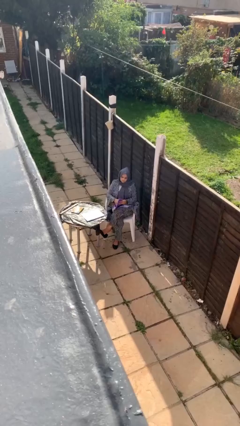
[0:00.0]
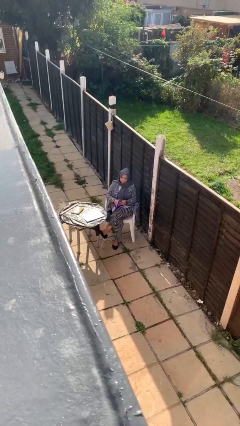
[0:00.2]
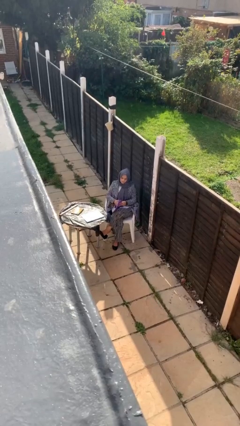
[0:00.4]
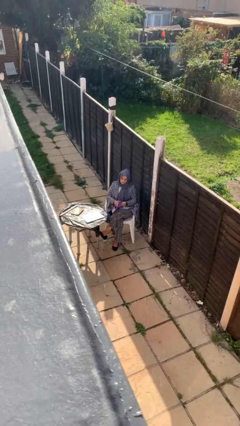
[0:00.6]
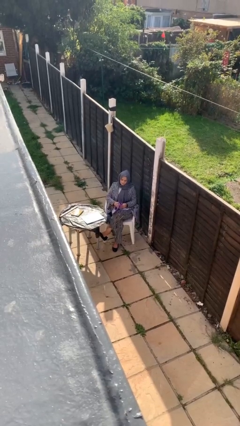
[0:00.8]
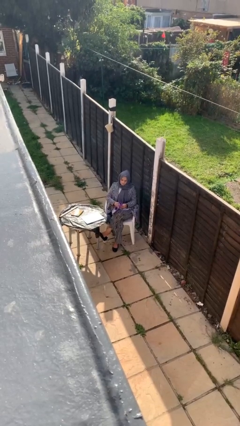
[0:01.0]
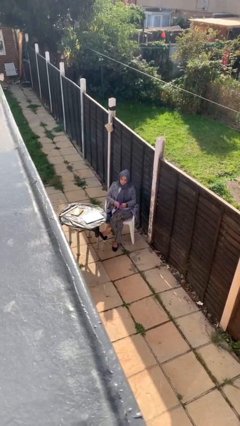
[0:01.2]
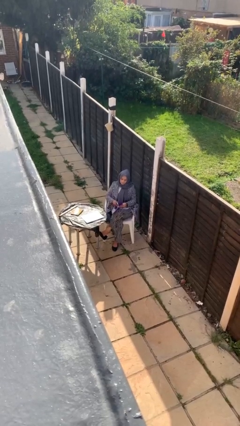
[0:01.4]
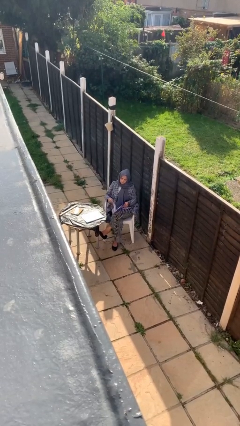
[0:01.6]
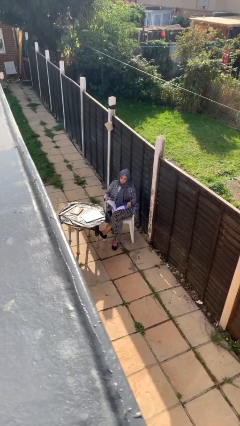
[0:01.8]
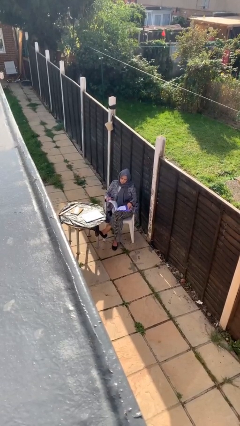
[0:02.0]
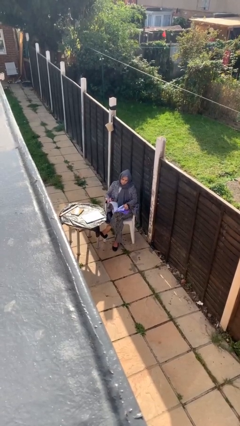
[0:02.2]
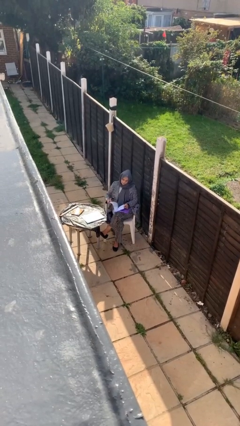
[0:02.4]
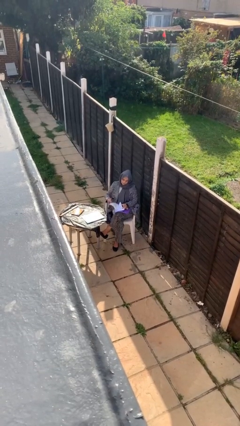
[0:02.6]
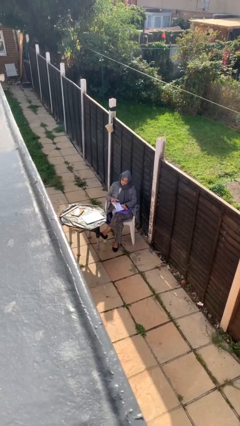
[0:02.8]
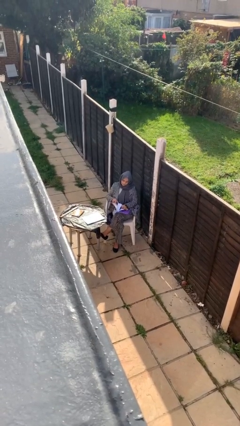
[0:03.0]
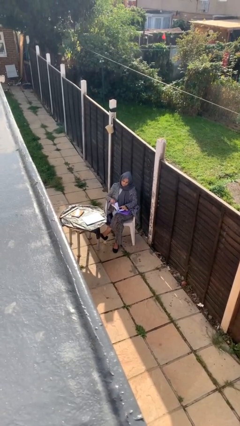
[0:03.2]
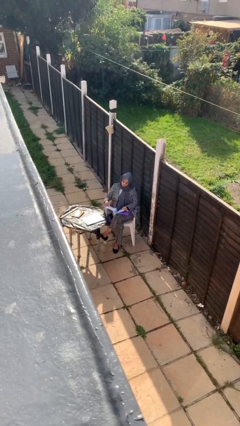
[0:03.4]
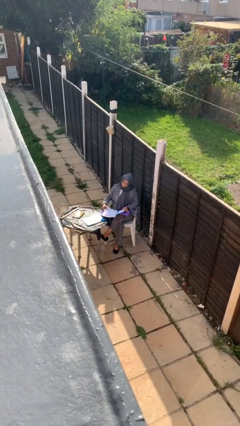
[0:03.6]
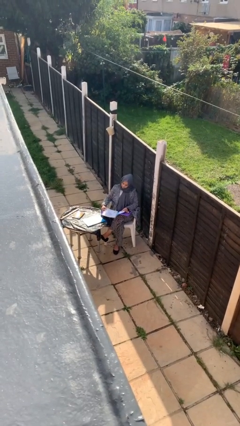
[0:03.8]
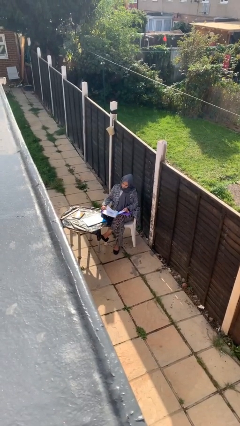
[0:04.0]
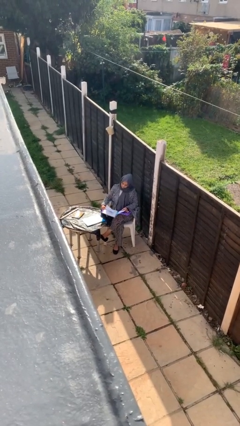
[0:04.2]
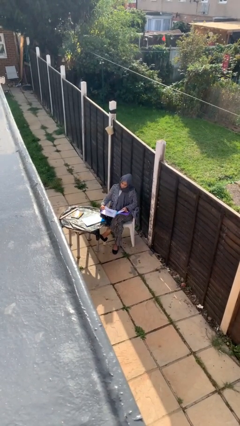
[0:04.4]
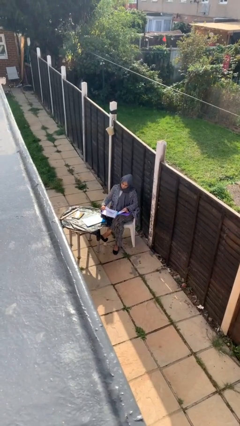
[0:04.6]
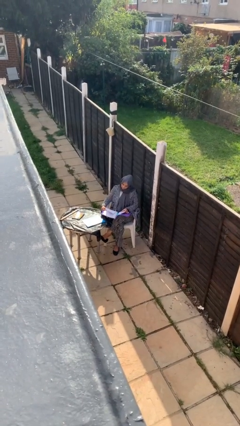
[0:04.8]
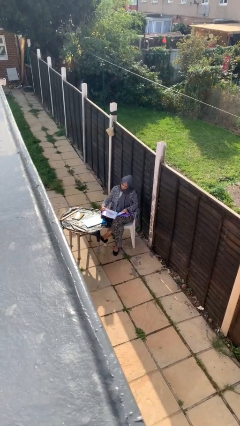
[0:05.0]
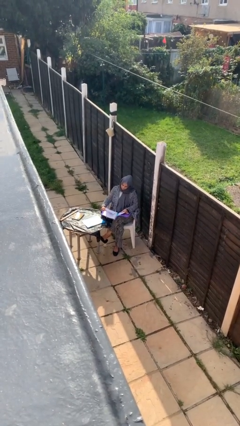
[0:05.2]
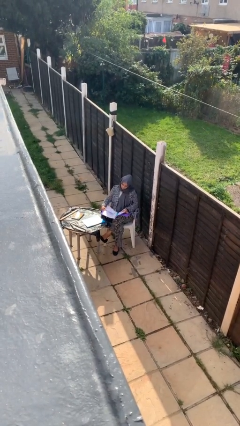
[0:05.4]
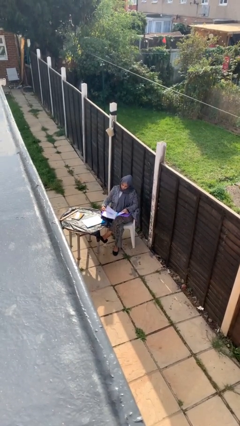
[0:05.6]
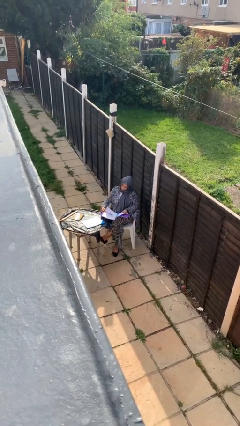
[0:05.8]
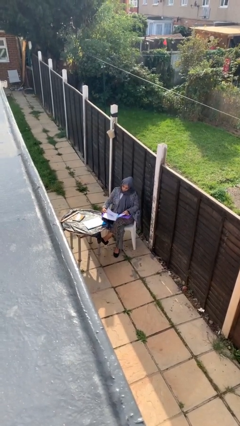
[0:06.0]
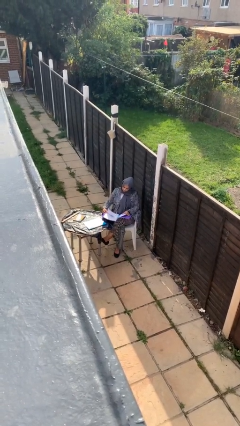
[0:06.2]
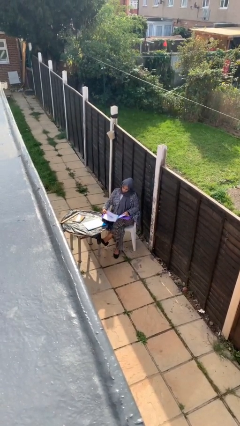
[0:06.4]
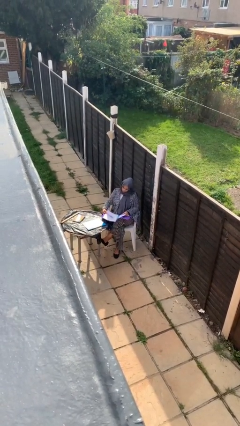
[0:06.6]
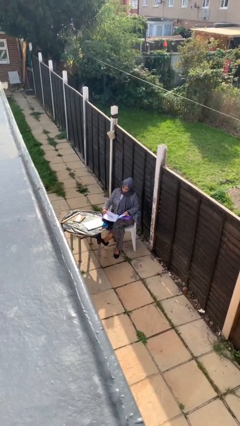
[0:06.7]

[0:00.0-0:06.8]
person reads document

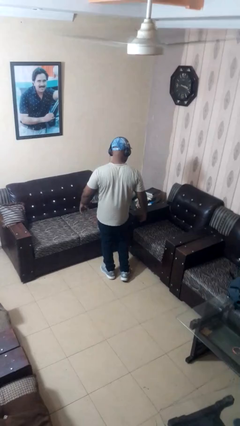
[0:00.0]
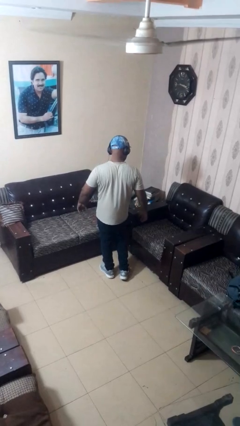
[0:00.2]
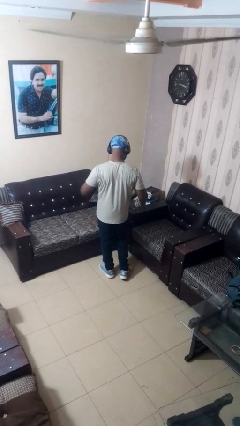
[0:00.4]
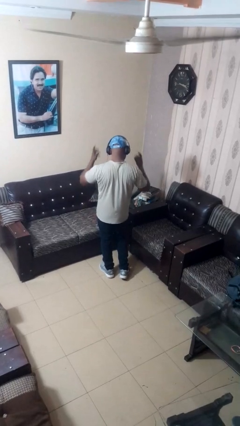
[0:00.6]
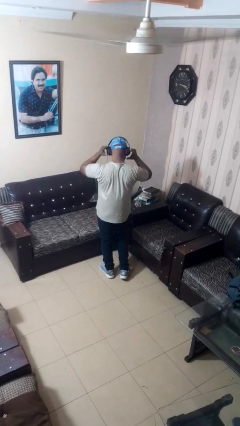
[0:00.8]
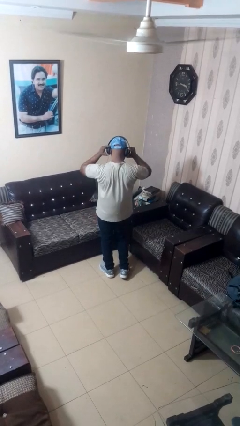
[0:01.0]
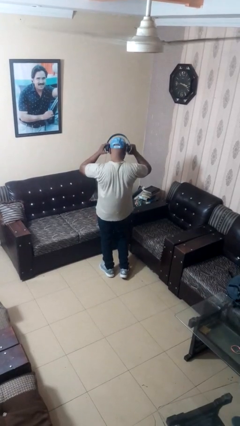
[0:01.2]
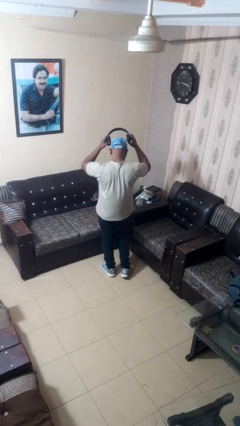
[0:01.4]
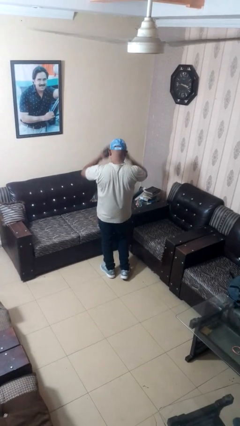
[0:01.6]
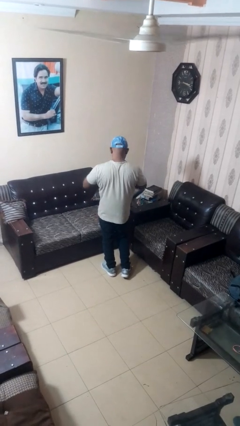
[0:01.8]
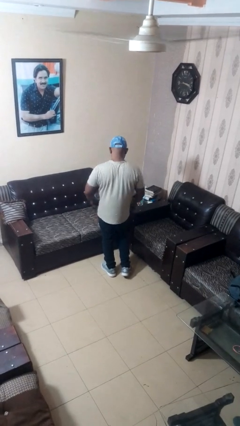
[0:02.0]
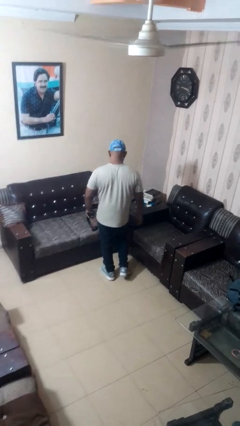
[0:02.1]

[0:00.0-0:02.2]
person takes off headphones

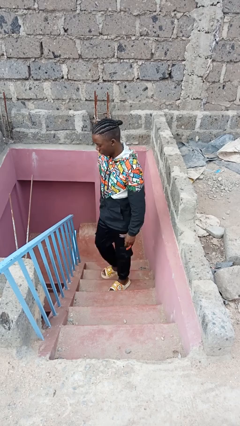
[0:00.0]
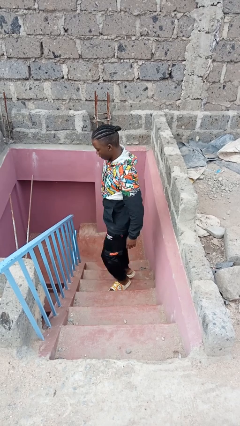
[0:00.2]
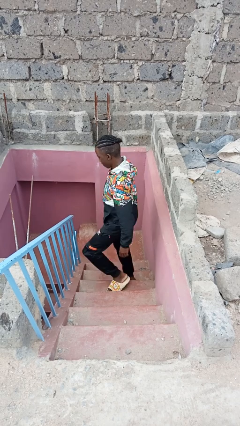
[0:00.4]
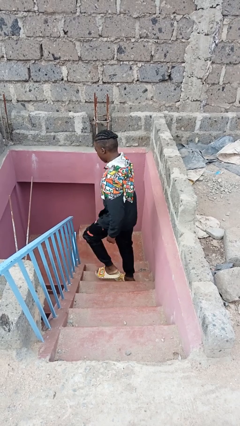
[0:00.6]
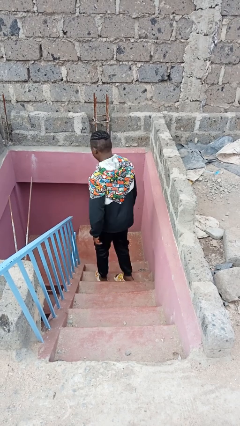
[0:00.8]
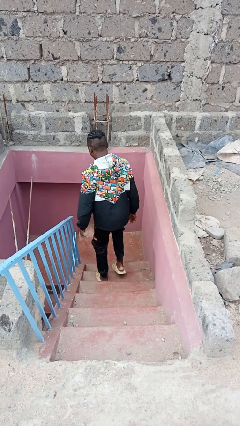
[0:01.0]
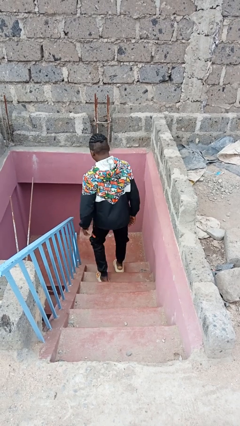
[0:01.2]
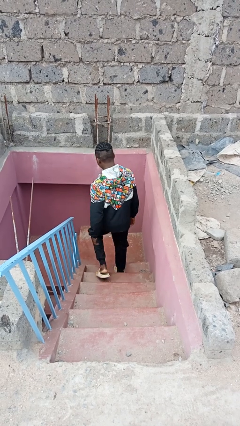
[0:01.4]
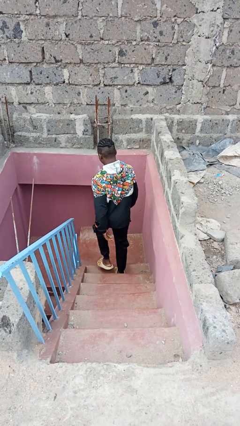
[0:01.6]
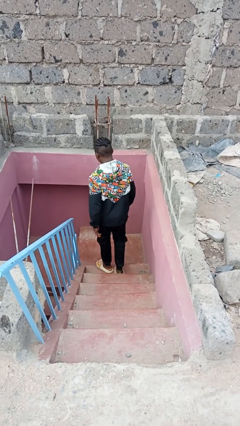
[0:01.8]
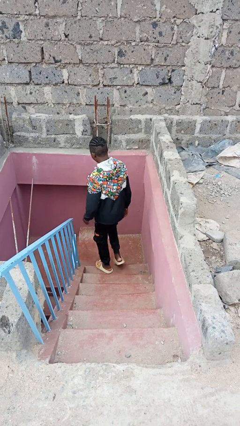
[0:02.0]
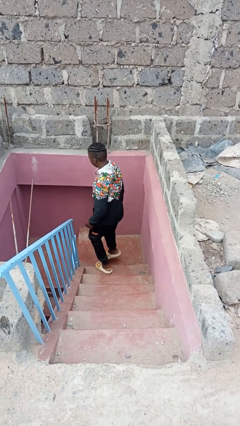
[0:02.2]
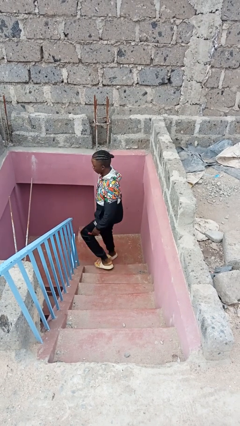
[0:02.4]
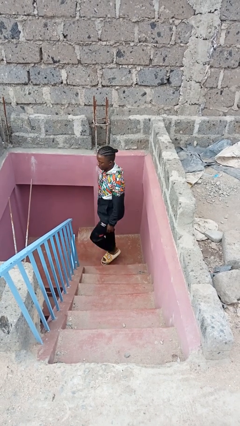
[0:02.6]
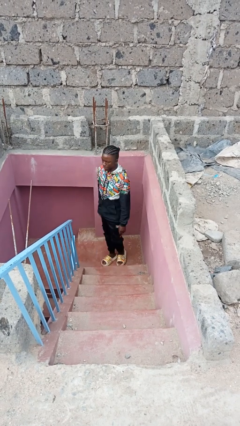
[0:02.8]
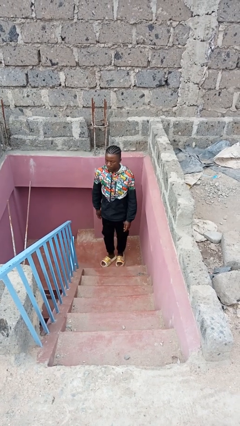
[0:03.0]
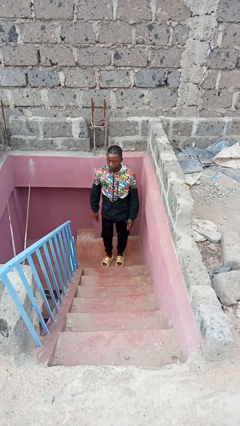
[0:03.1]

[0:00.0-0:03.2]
person climbs down stairs

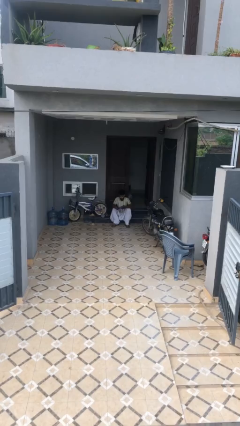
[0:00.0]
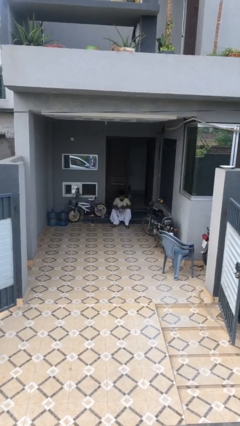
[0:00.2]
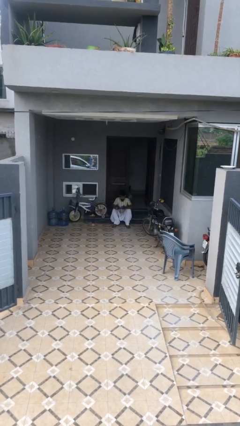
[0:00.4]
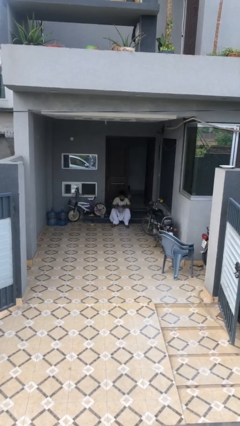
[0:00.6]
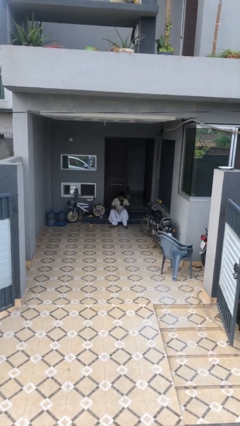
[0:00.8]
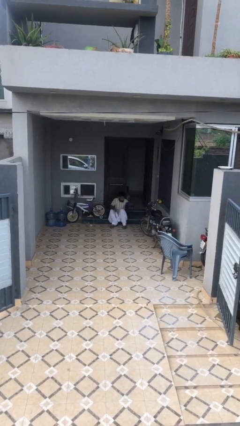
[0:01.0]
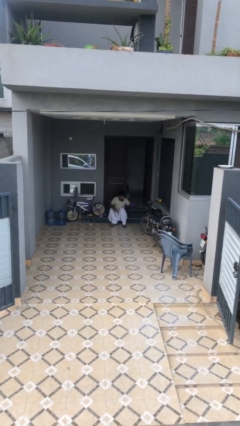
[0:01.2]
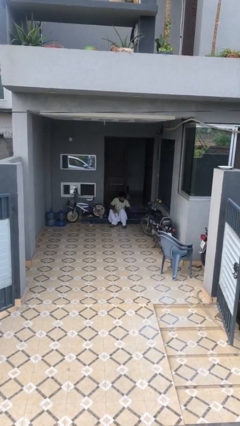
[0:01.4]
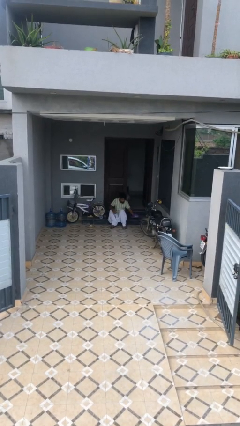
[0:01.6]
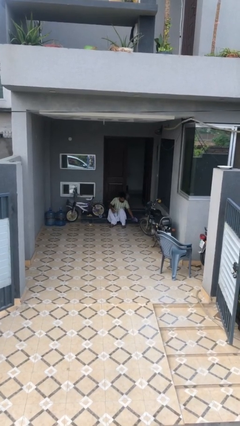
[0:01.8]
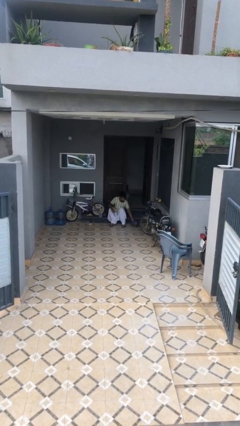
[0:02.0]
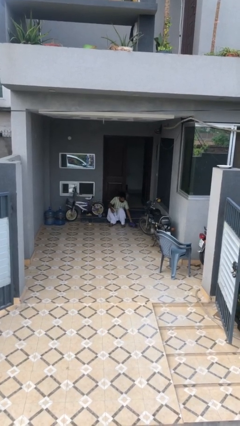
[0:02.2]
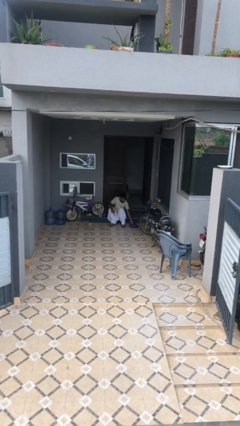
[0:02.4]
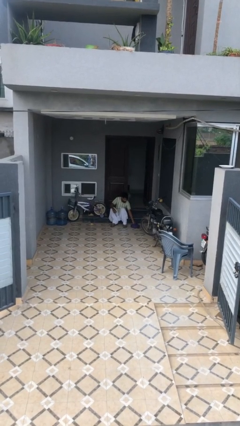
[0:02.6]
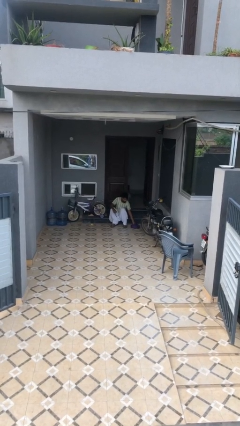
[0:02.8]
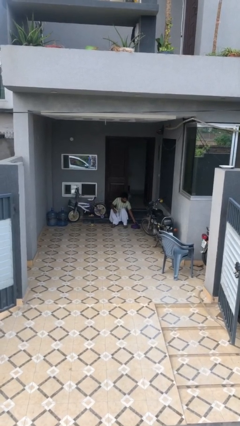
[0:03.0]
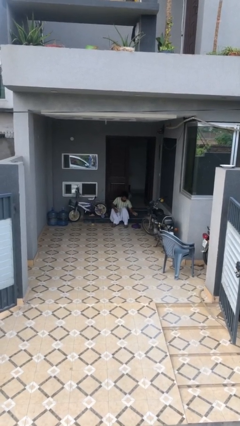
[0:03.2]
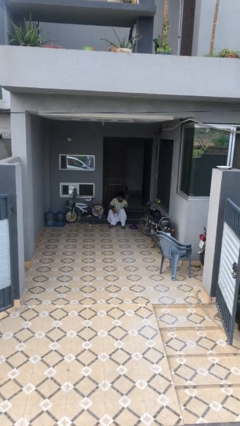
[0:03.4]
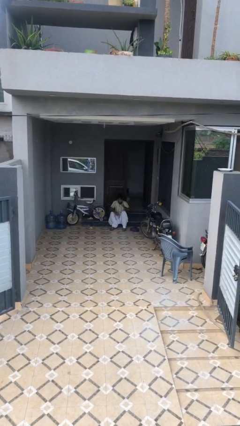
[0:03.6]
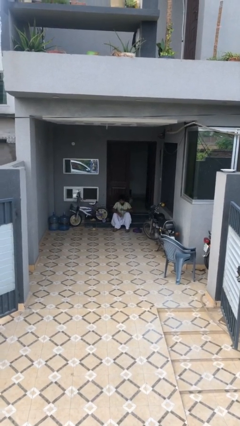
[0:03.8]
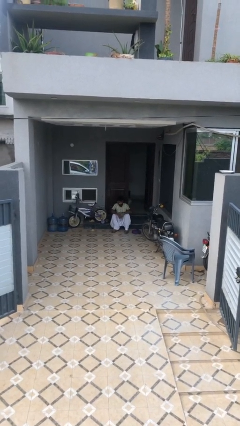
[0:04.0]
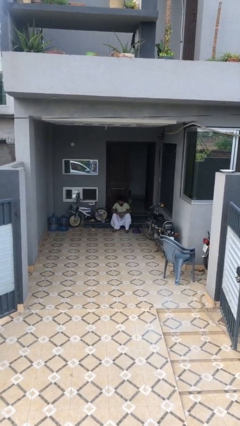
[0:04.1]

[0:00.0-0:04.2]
person puts down object on floor

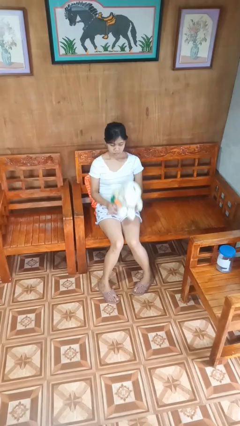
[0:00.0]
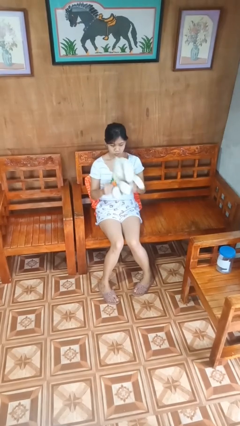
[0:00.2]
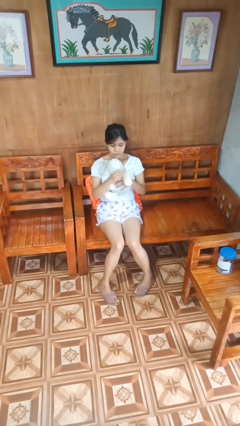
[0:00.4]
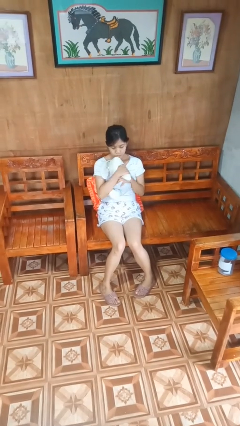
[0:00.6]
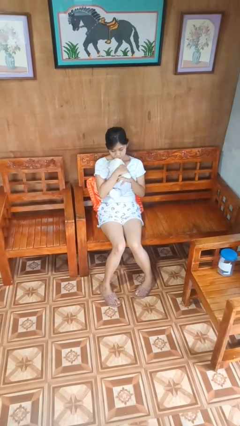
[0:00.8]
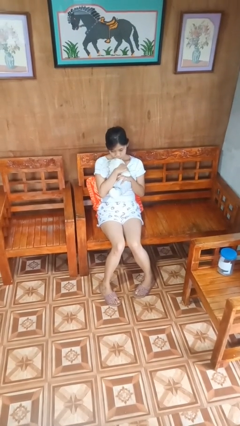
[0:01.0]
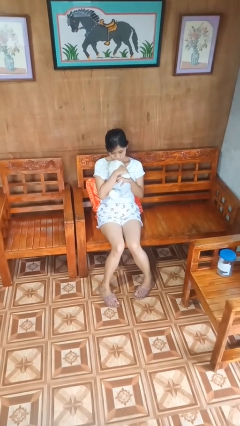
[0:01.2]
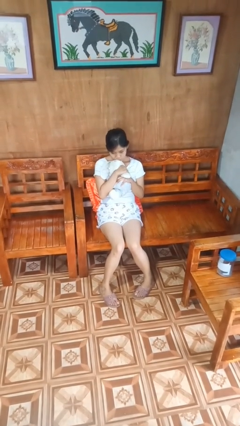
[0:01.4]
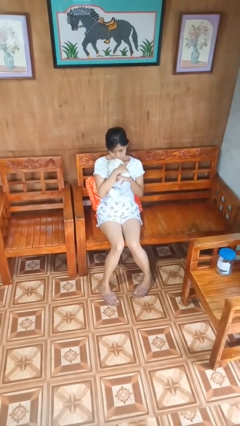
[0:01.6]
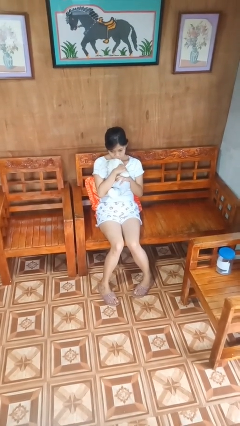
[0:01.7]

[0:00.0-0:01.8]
person hugs stuffed animal
